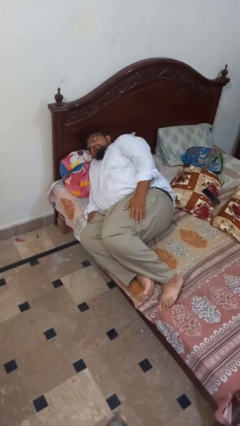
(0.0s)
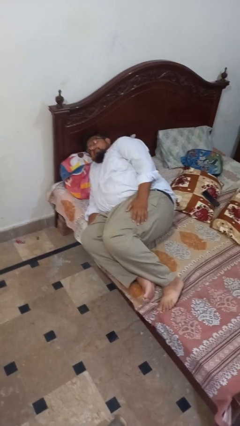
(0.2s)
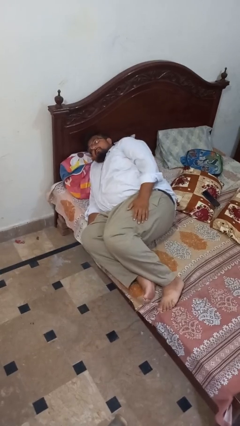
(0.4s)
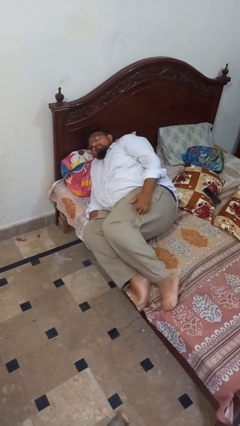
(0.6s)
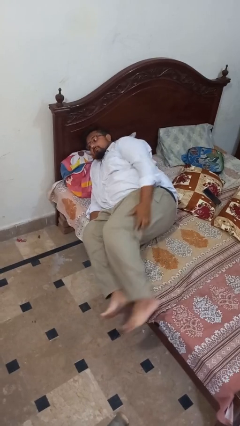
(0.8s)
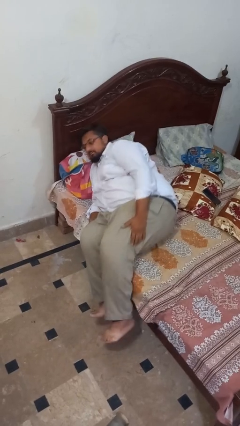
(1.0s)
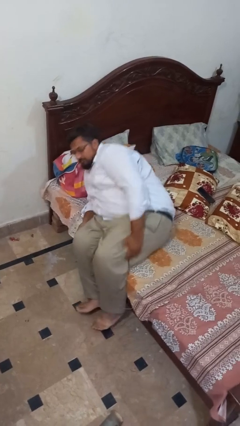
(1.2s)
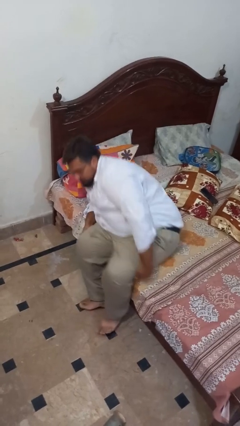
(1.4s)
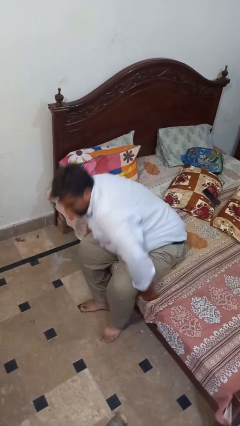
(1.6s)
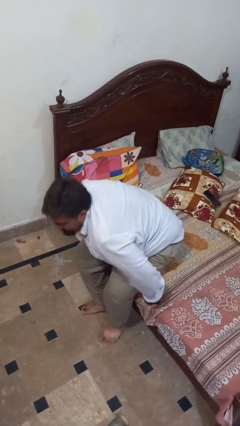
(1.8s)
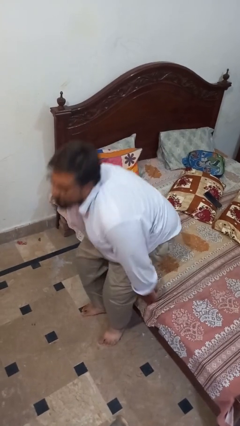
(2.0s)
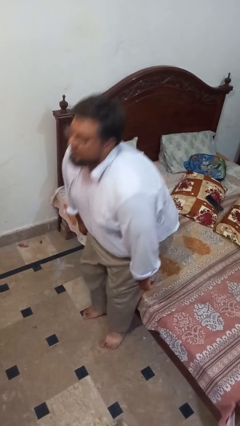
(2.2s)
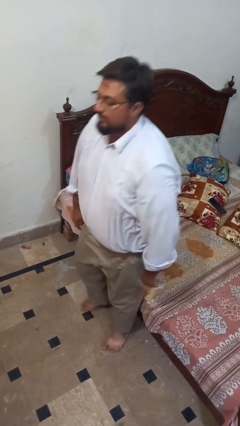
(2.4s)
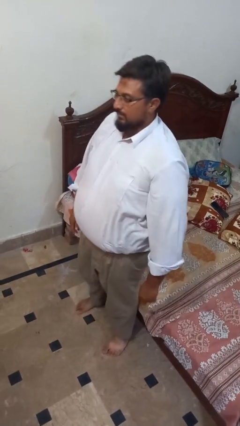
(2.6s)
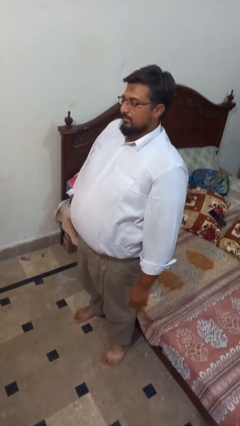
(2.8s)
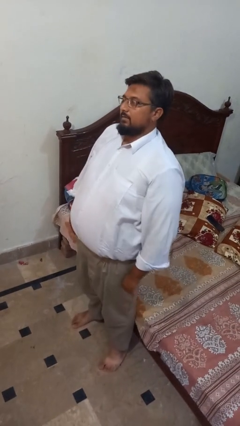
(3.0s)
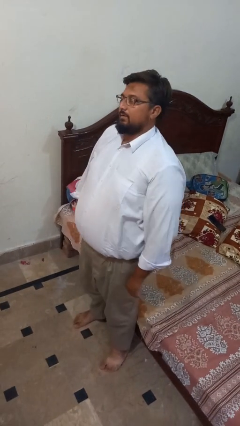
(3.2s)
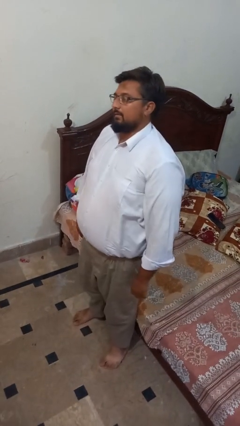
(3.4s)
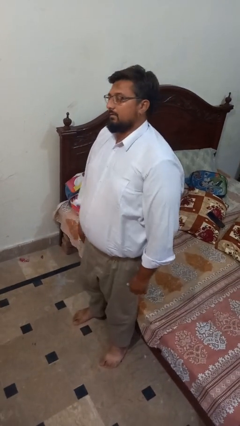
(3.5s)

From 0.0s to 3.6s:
person stands up

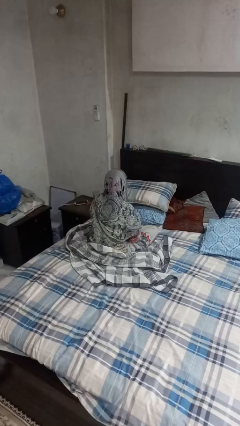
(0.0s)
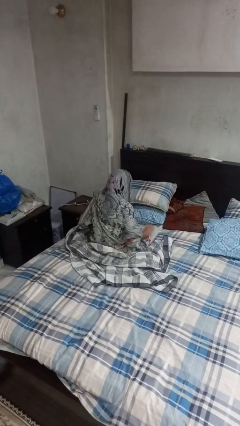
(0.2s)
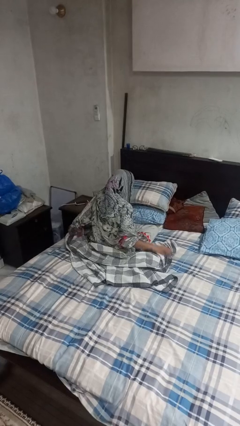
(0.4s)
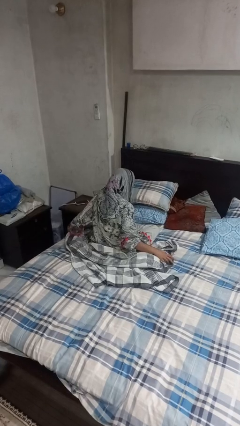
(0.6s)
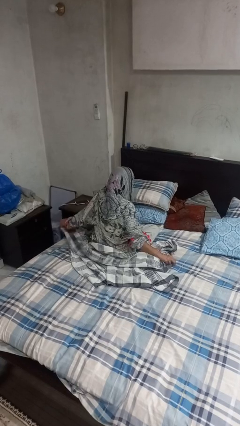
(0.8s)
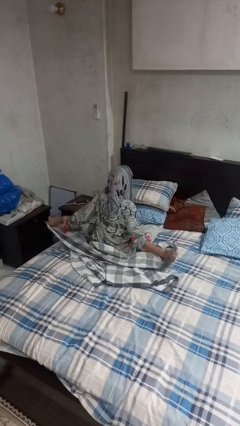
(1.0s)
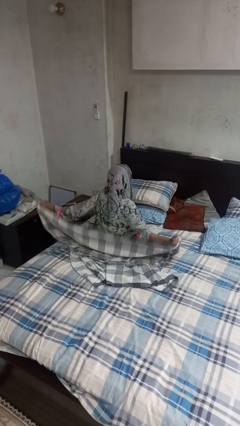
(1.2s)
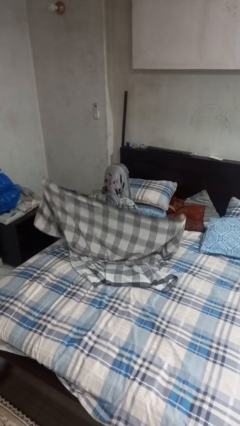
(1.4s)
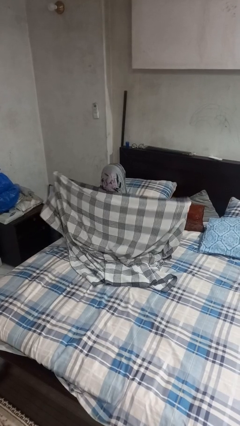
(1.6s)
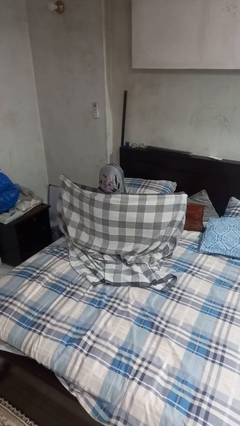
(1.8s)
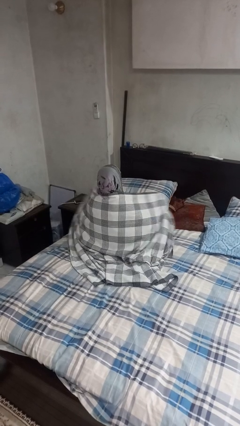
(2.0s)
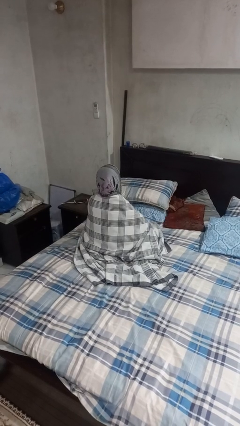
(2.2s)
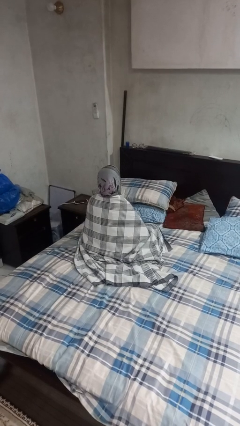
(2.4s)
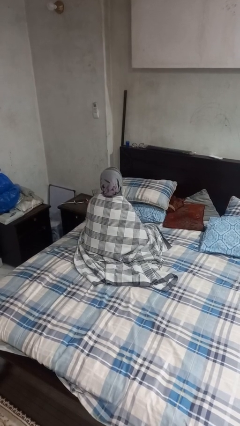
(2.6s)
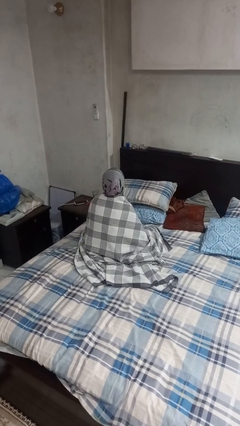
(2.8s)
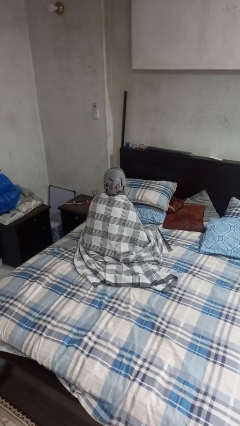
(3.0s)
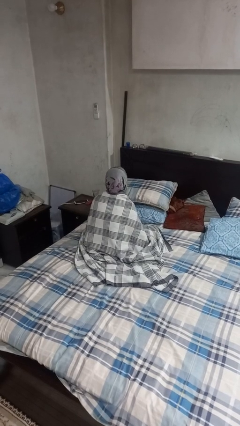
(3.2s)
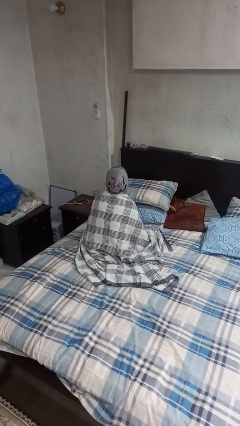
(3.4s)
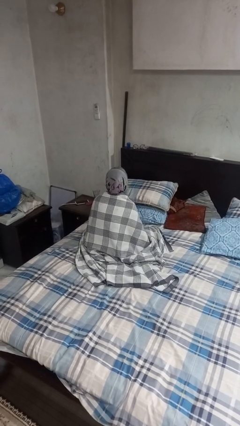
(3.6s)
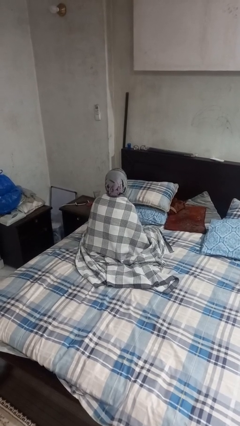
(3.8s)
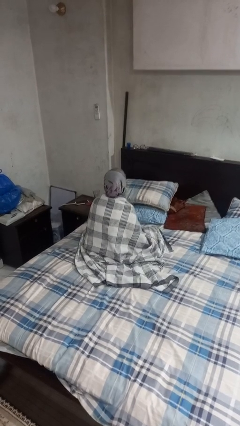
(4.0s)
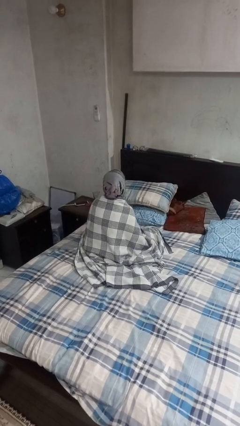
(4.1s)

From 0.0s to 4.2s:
person covers with blanket

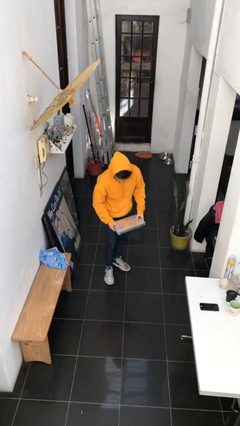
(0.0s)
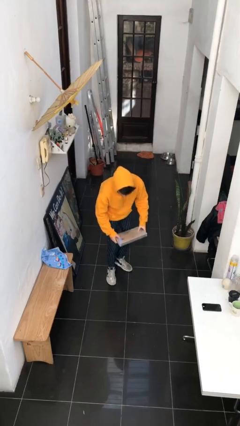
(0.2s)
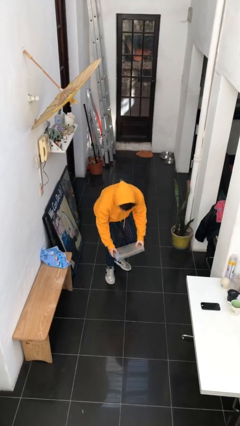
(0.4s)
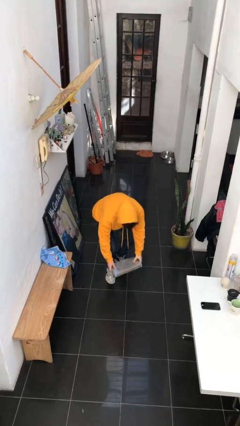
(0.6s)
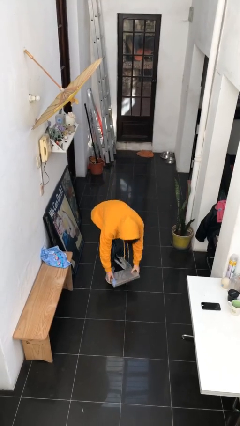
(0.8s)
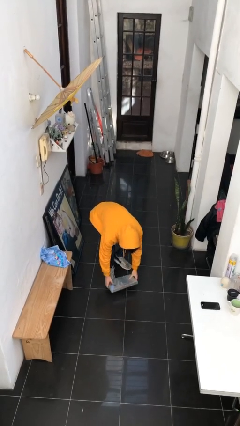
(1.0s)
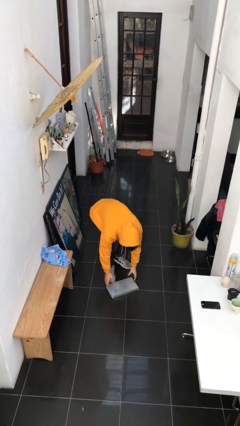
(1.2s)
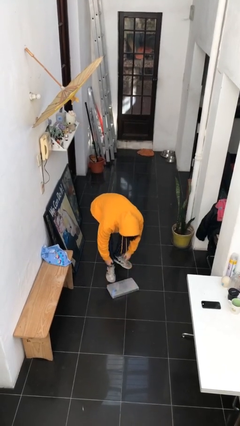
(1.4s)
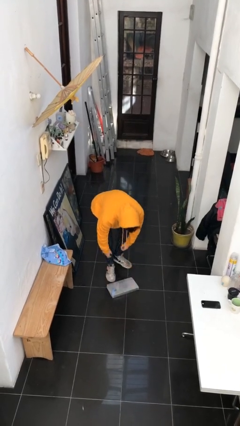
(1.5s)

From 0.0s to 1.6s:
person puts down object on floor

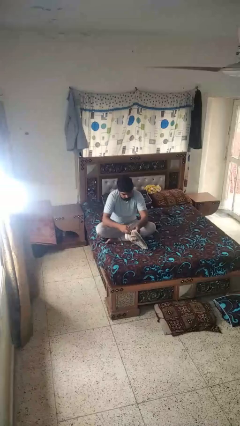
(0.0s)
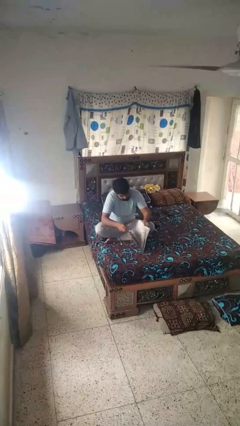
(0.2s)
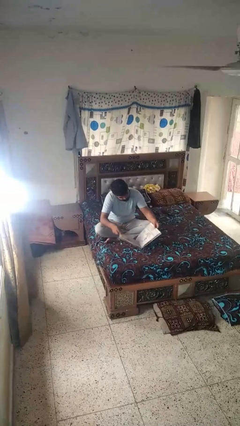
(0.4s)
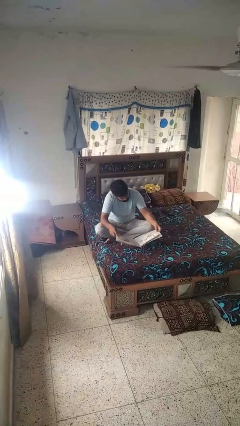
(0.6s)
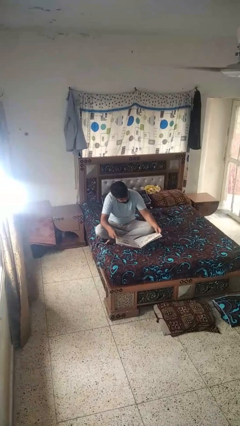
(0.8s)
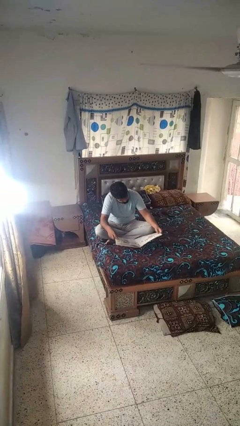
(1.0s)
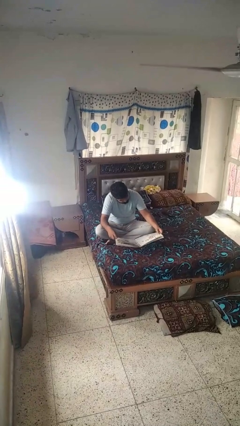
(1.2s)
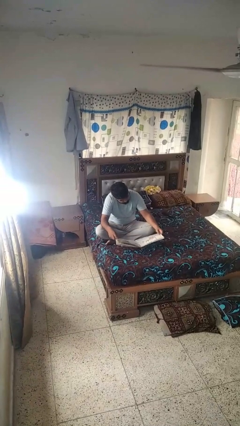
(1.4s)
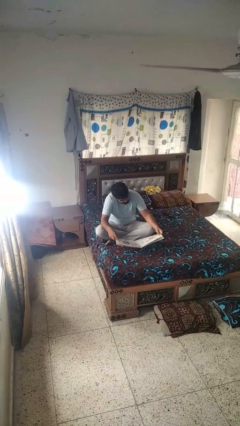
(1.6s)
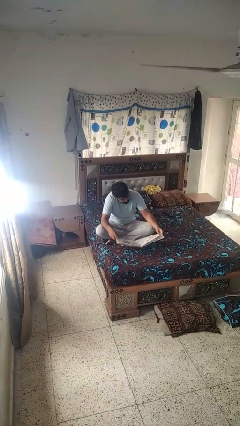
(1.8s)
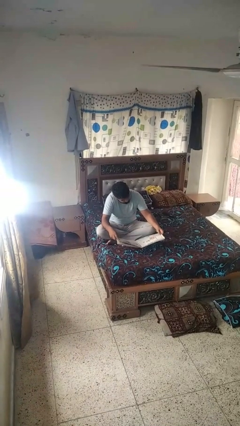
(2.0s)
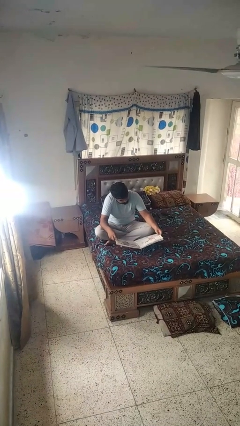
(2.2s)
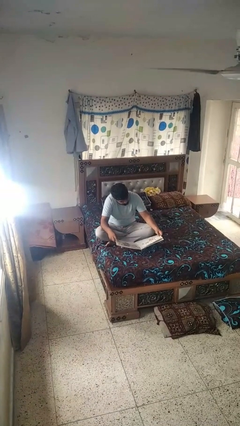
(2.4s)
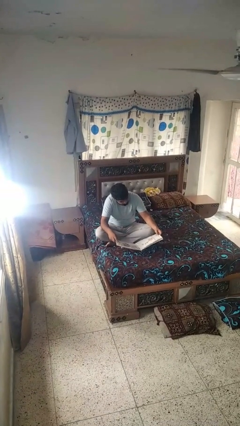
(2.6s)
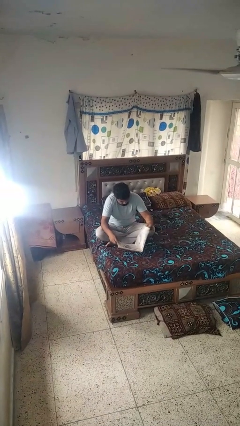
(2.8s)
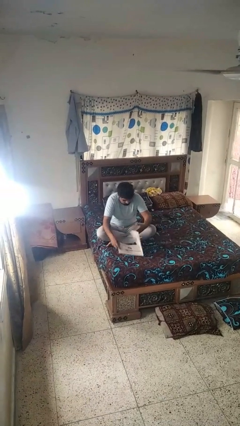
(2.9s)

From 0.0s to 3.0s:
person reads magazine

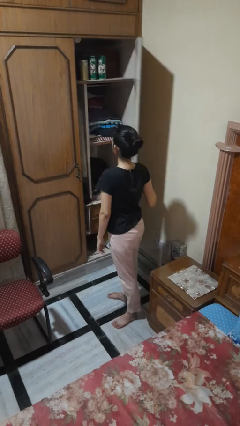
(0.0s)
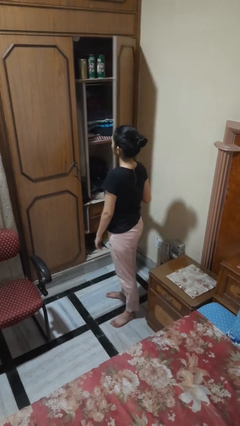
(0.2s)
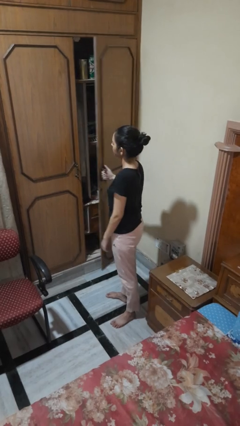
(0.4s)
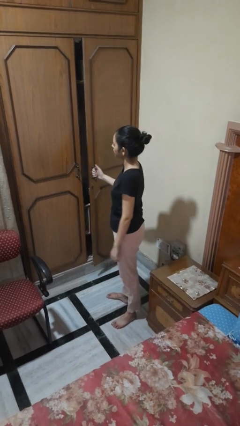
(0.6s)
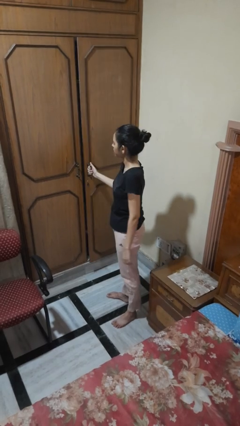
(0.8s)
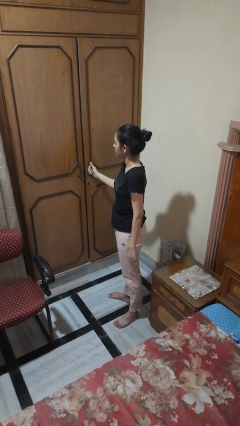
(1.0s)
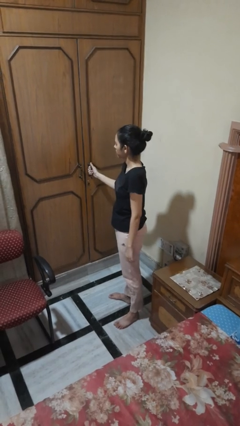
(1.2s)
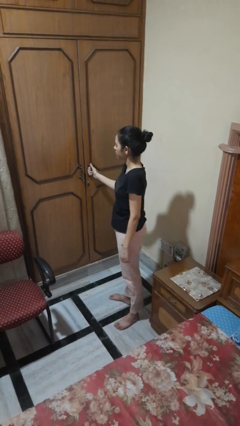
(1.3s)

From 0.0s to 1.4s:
person closes closet door

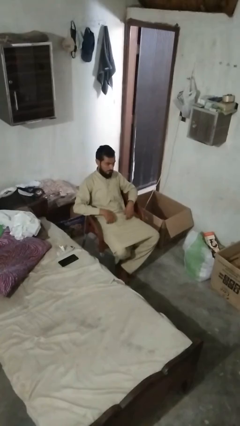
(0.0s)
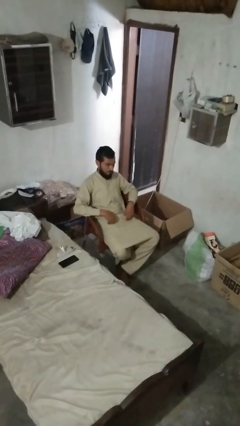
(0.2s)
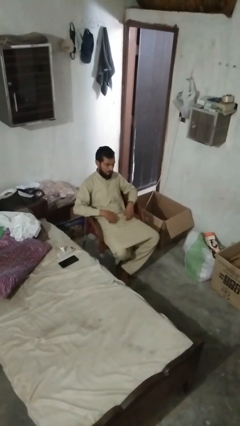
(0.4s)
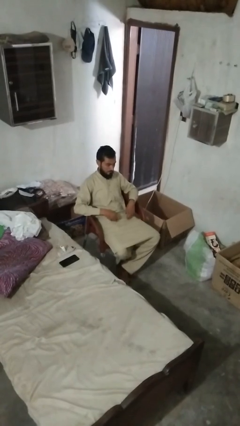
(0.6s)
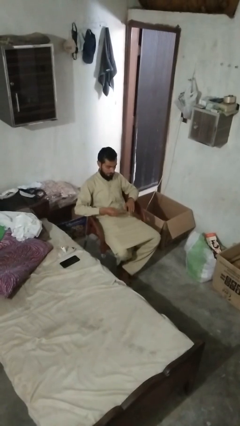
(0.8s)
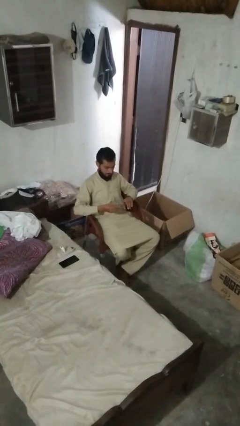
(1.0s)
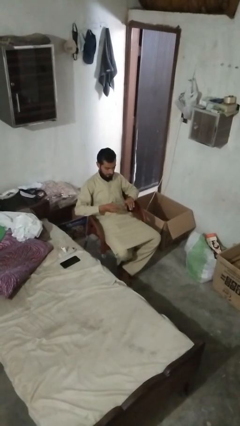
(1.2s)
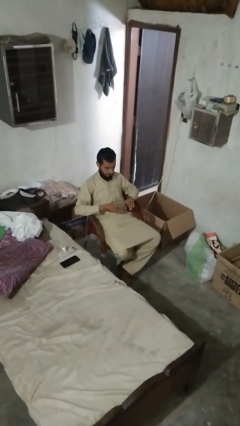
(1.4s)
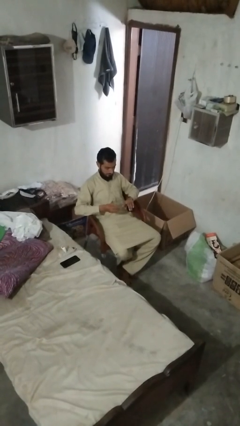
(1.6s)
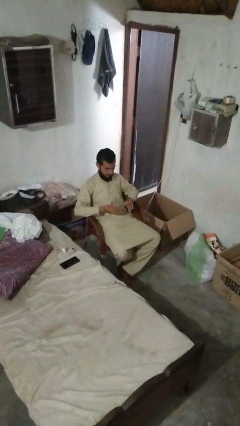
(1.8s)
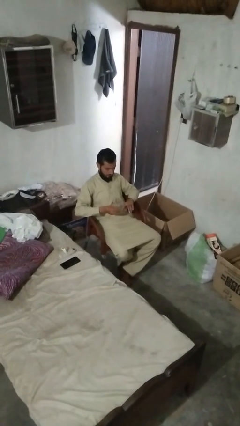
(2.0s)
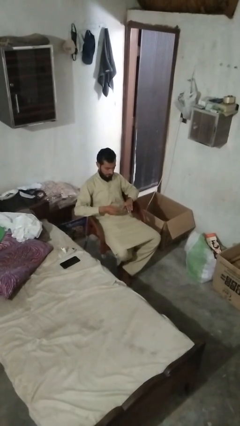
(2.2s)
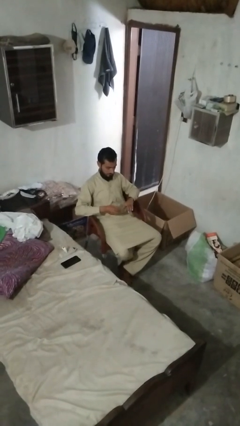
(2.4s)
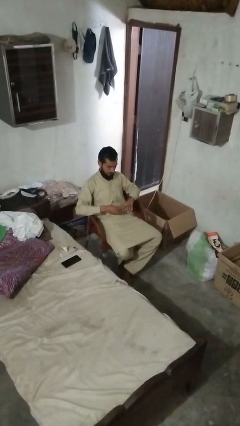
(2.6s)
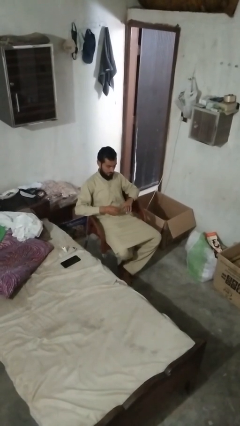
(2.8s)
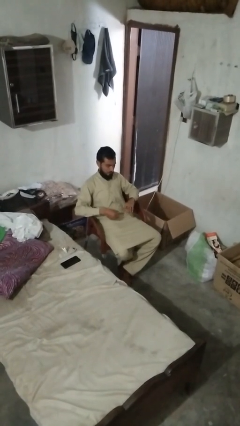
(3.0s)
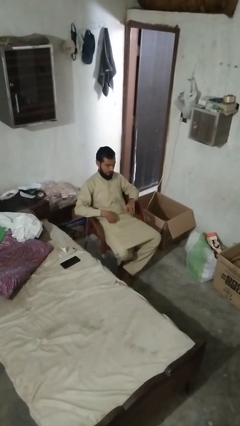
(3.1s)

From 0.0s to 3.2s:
person clips fingernails

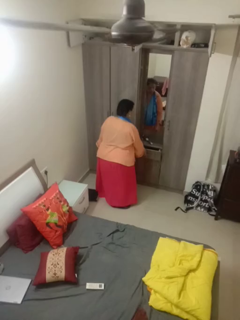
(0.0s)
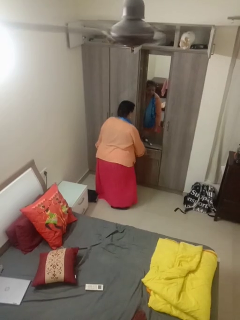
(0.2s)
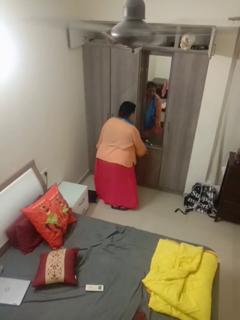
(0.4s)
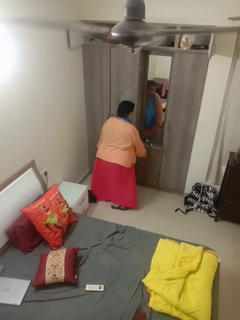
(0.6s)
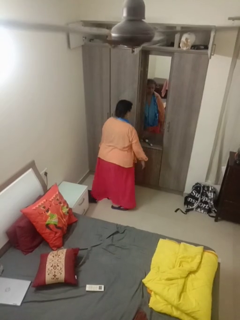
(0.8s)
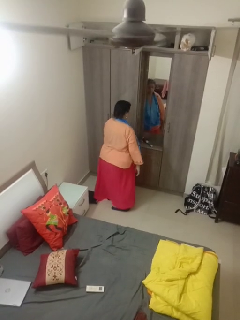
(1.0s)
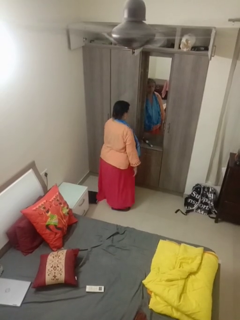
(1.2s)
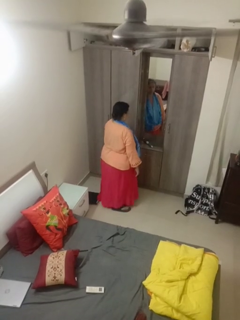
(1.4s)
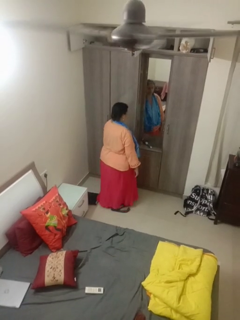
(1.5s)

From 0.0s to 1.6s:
person closes dresser drawer
